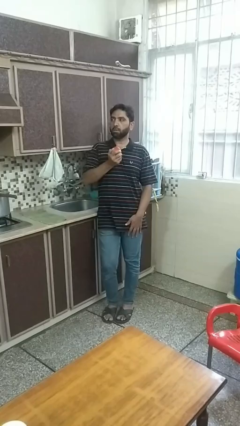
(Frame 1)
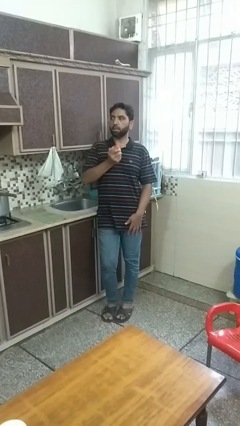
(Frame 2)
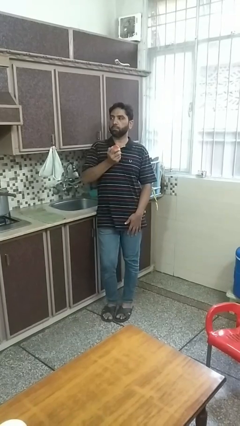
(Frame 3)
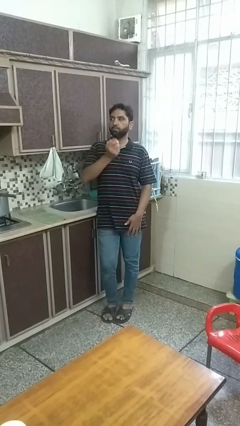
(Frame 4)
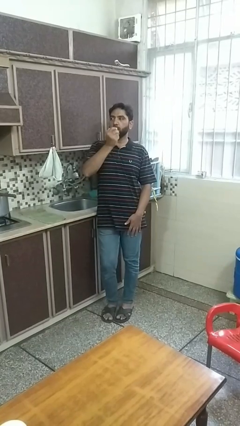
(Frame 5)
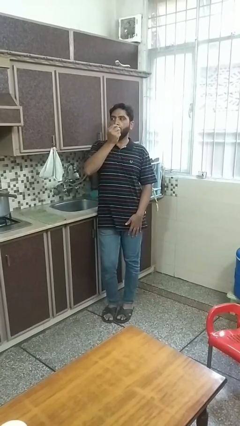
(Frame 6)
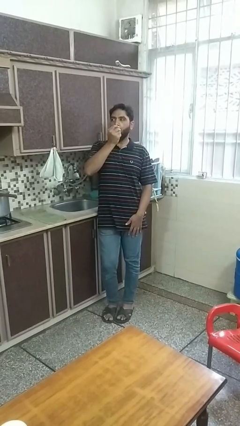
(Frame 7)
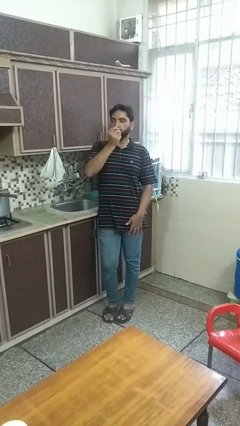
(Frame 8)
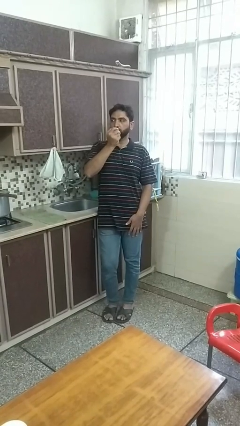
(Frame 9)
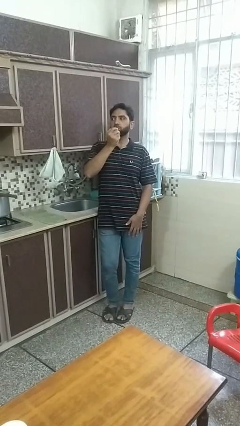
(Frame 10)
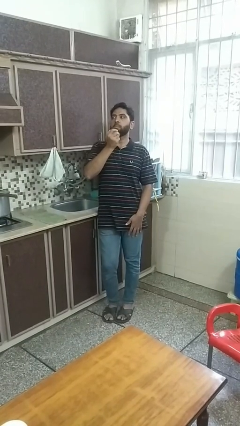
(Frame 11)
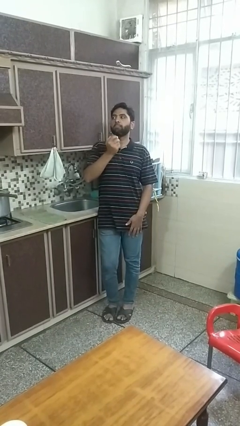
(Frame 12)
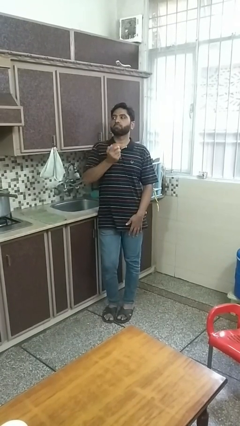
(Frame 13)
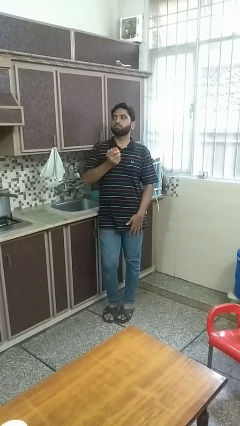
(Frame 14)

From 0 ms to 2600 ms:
person eats apple

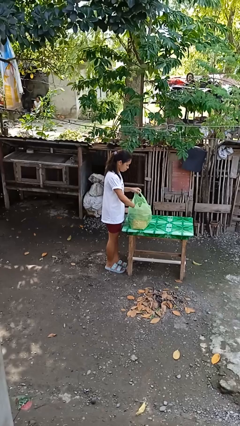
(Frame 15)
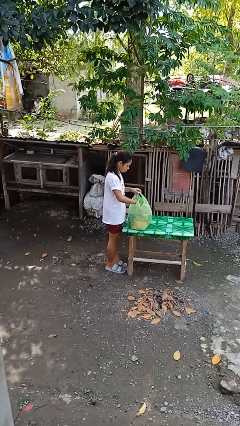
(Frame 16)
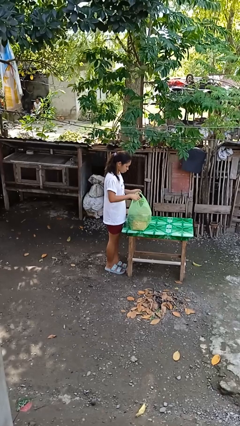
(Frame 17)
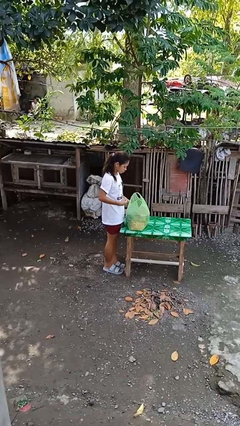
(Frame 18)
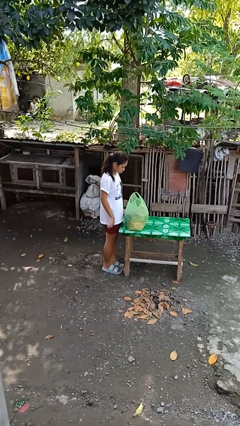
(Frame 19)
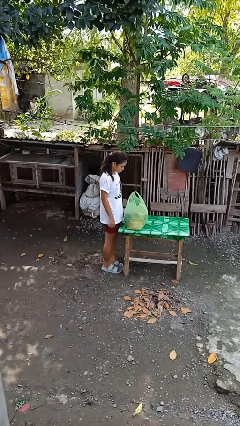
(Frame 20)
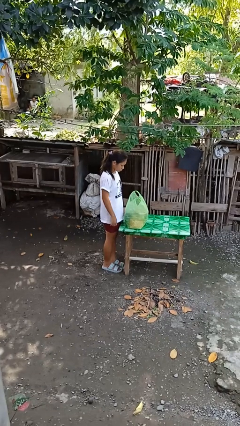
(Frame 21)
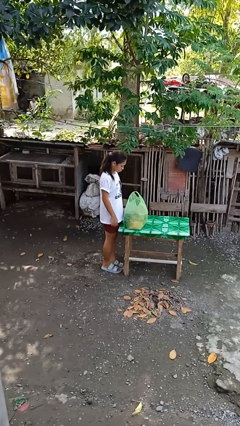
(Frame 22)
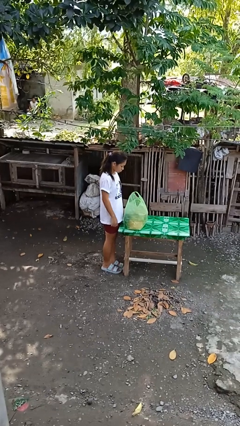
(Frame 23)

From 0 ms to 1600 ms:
person hits person with pillow

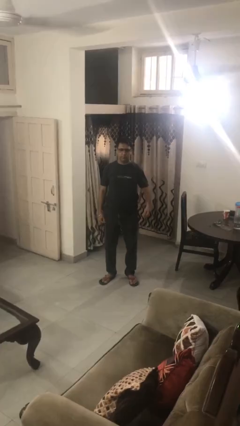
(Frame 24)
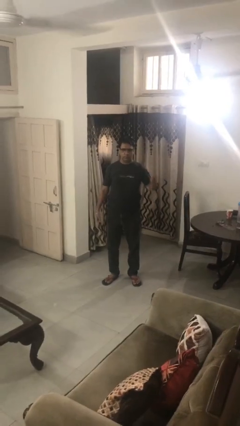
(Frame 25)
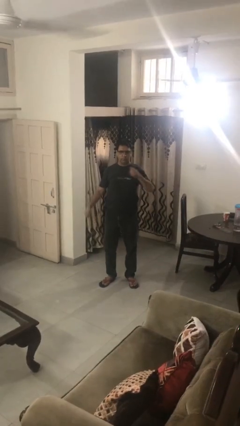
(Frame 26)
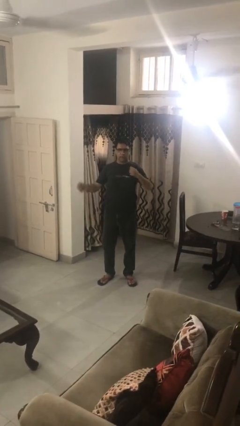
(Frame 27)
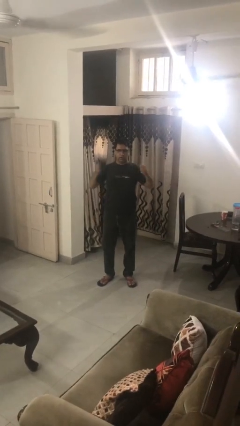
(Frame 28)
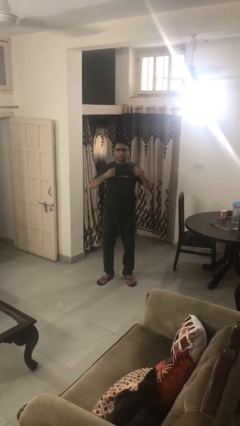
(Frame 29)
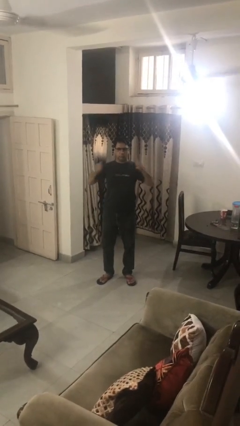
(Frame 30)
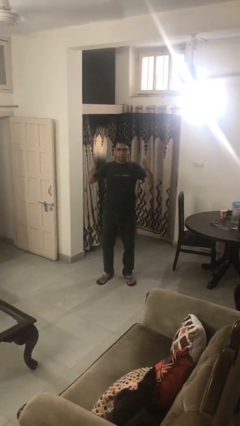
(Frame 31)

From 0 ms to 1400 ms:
person drums on chest

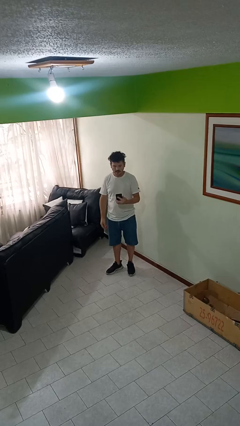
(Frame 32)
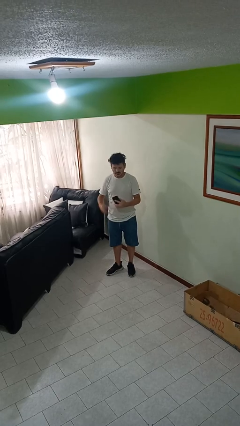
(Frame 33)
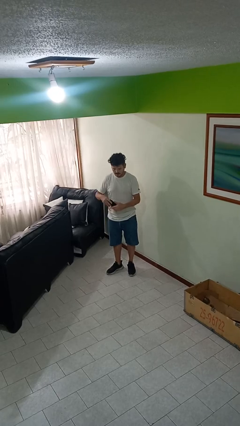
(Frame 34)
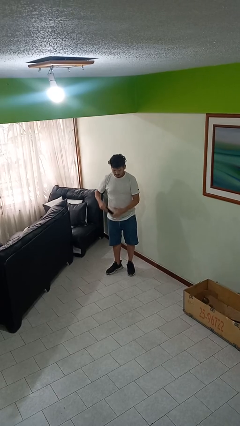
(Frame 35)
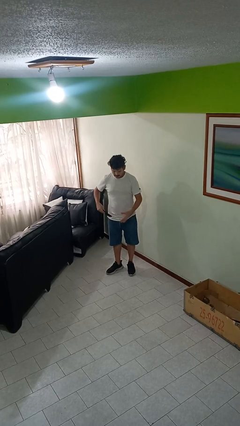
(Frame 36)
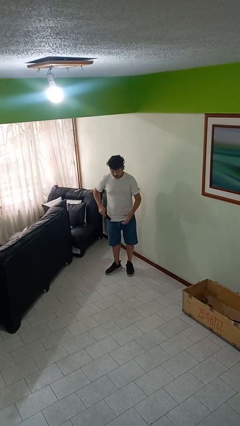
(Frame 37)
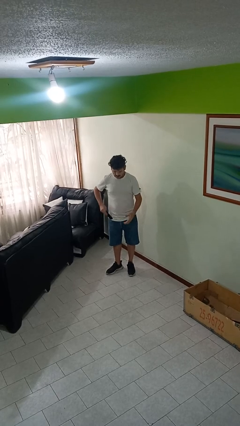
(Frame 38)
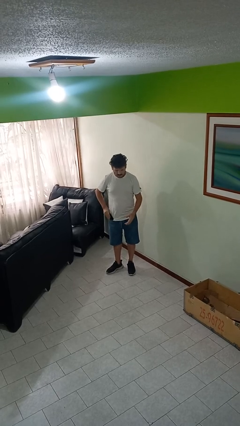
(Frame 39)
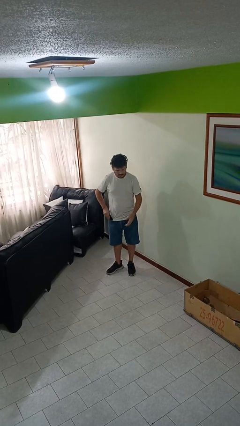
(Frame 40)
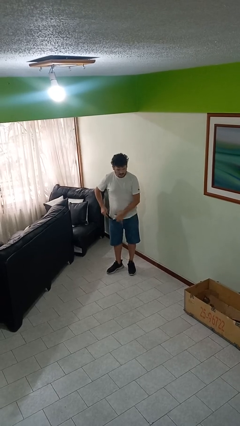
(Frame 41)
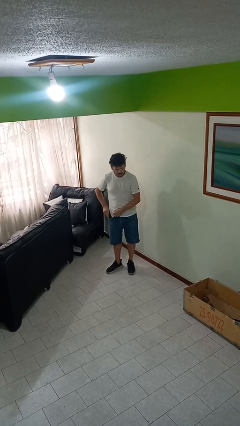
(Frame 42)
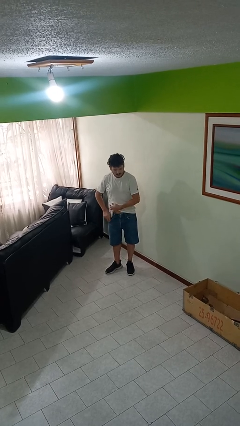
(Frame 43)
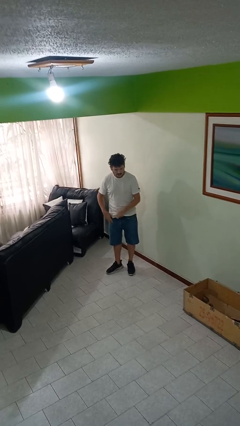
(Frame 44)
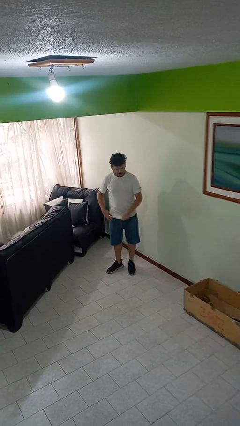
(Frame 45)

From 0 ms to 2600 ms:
person puts phone into pocket

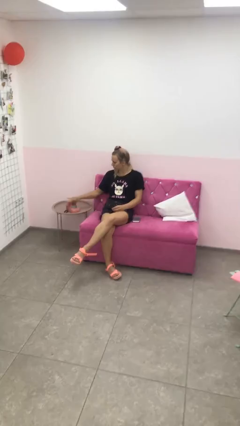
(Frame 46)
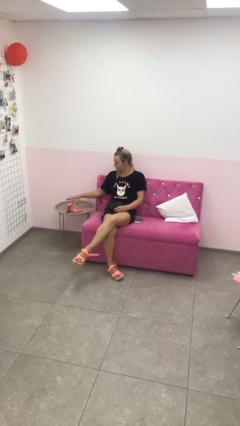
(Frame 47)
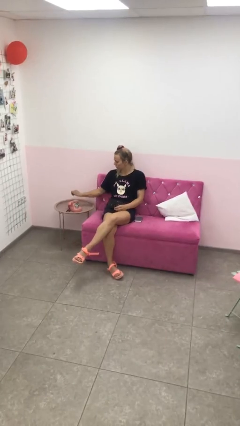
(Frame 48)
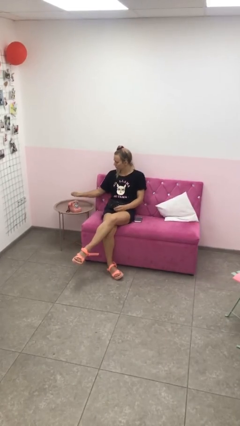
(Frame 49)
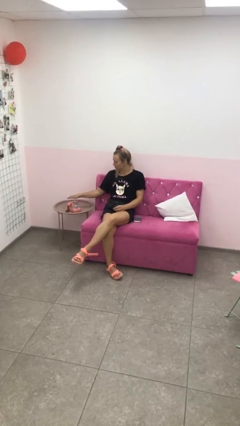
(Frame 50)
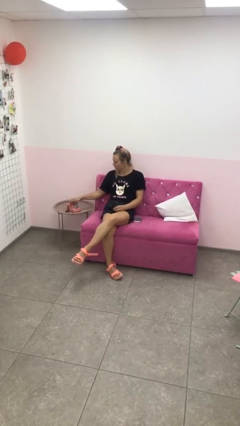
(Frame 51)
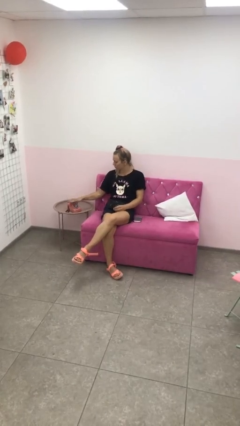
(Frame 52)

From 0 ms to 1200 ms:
person waves hand over object

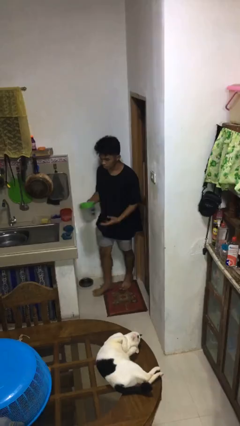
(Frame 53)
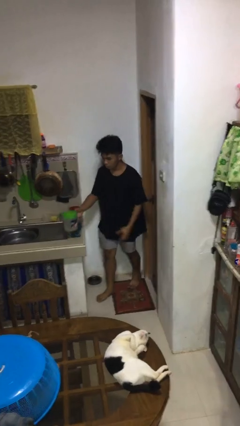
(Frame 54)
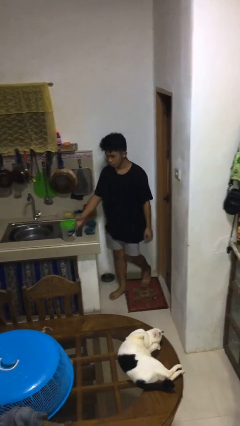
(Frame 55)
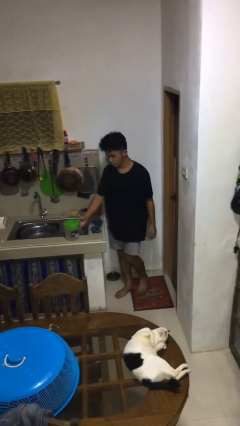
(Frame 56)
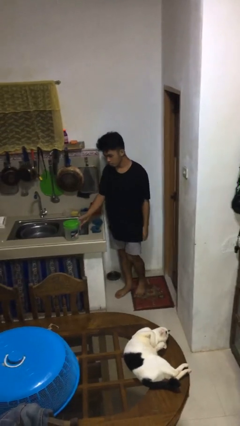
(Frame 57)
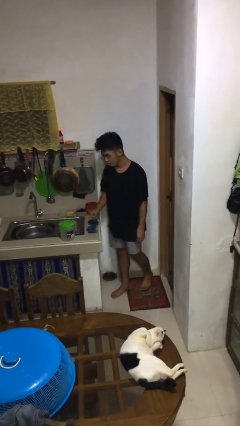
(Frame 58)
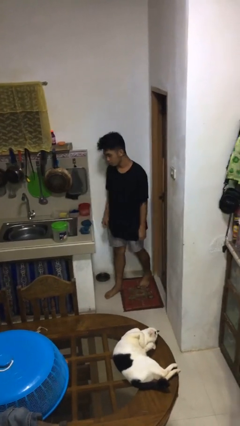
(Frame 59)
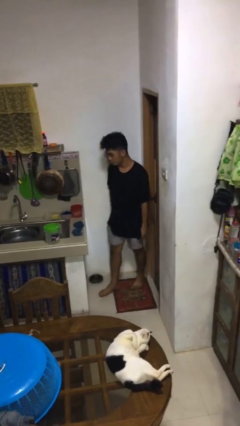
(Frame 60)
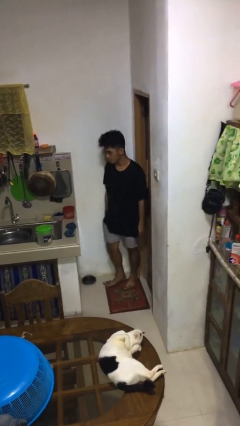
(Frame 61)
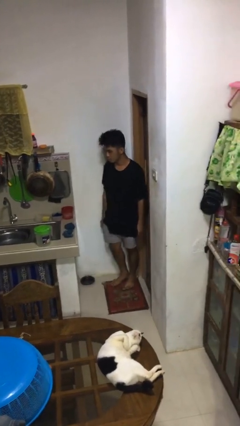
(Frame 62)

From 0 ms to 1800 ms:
person puts down object on countertop

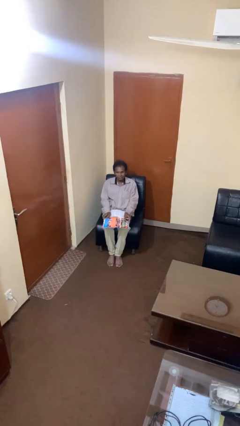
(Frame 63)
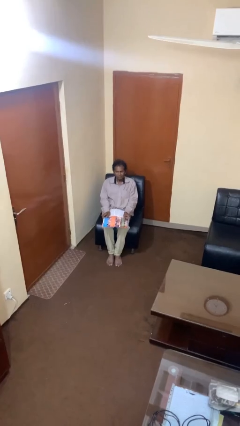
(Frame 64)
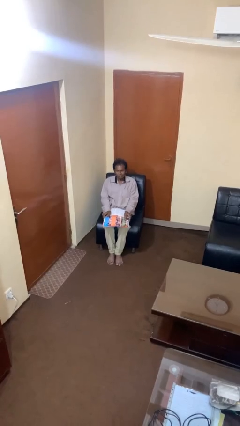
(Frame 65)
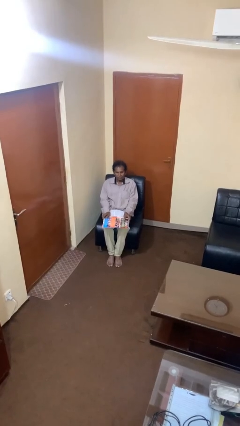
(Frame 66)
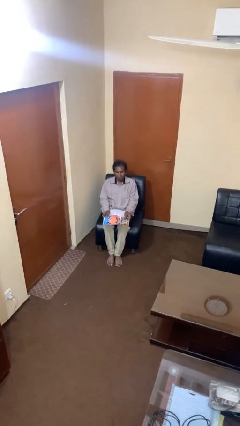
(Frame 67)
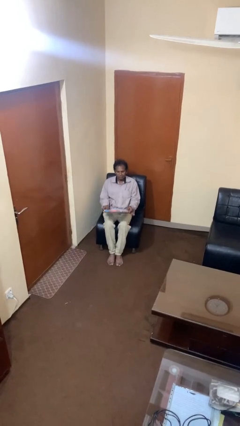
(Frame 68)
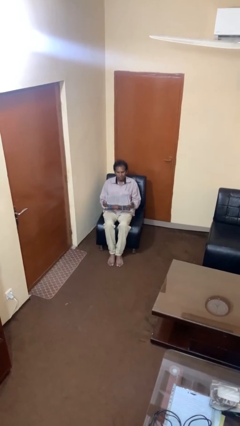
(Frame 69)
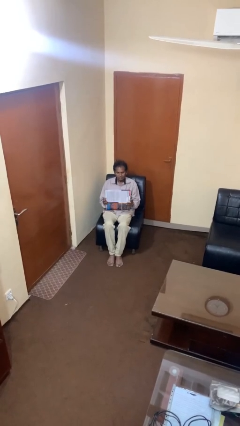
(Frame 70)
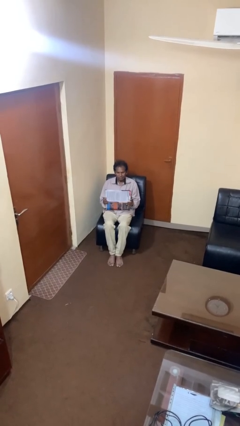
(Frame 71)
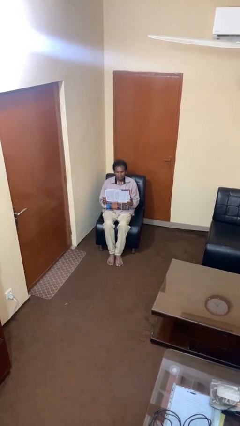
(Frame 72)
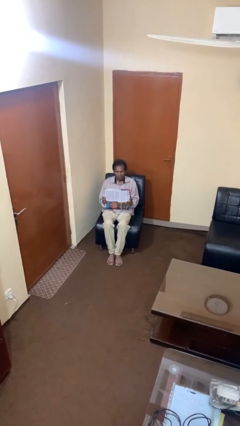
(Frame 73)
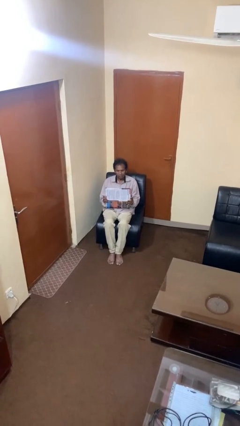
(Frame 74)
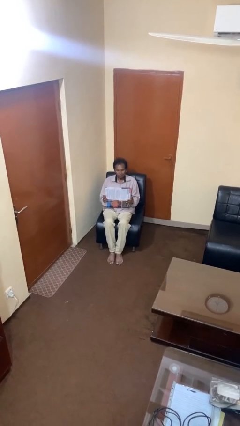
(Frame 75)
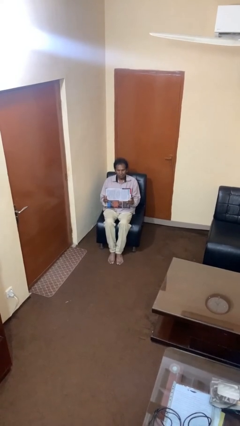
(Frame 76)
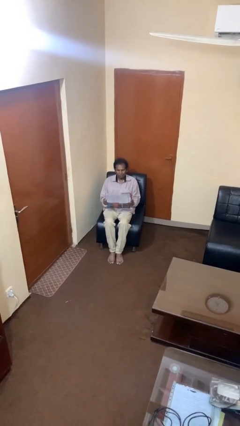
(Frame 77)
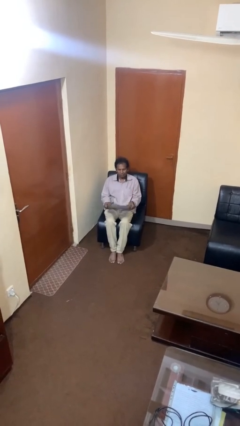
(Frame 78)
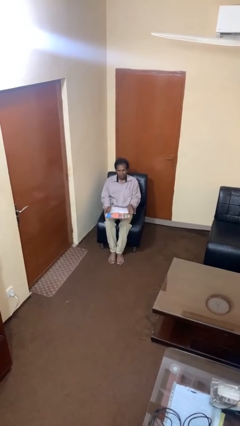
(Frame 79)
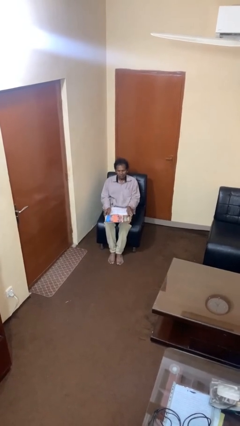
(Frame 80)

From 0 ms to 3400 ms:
person reads newspaper

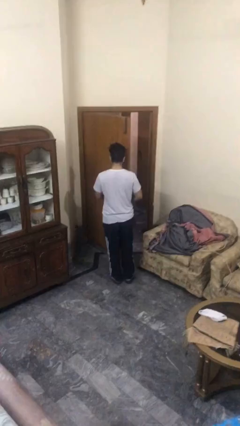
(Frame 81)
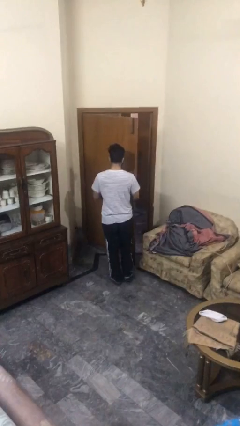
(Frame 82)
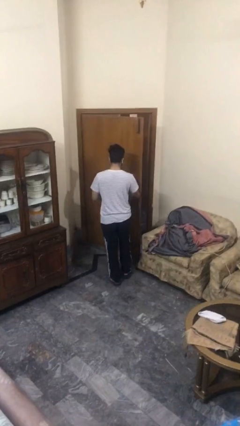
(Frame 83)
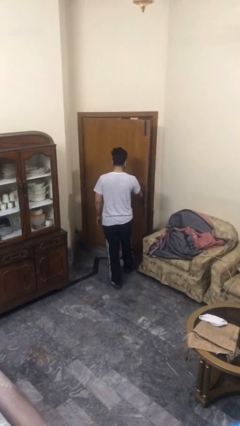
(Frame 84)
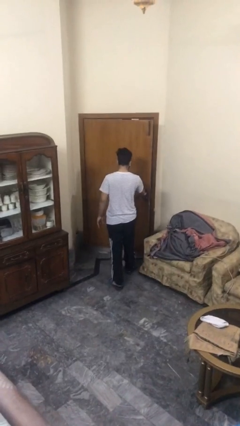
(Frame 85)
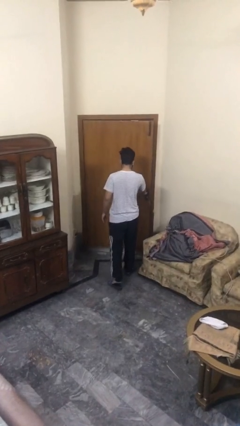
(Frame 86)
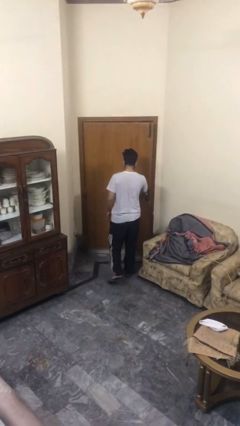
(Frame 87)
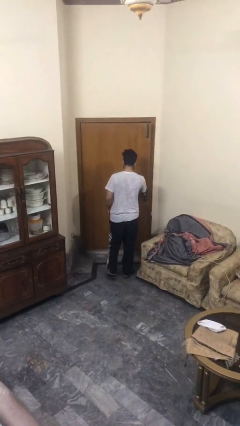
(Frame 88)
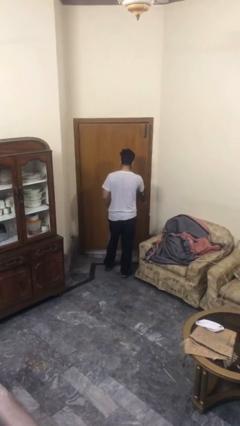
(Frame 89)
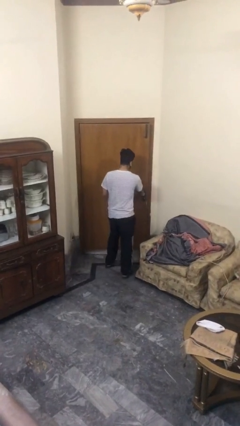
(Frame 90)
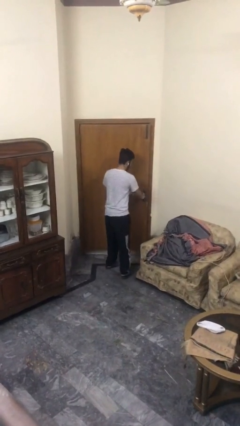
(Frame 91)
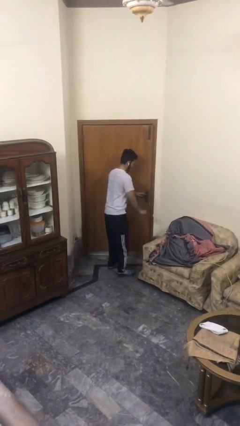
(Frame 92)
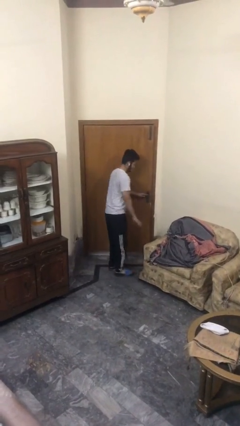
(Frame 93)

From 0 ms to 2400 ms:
person closes facility door
